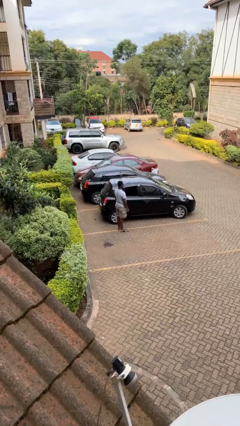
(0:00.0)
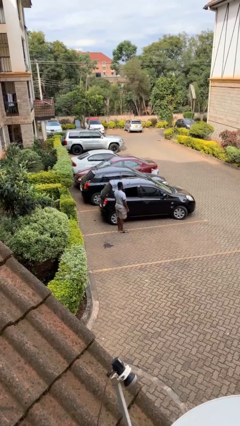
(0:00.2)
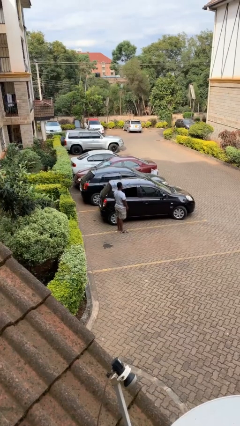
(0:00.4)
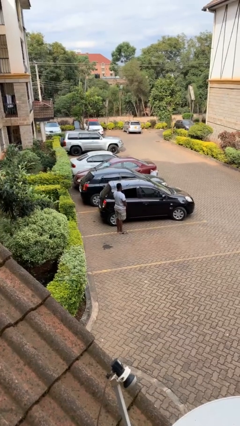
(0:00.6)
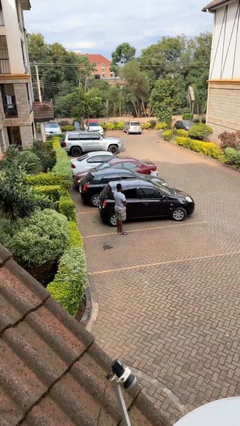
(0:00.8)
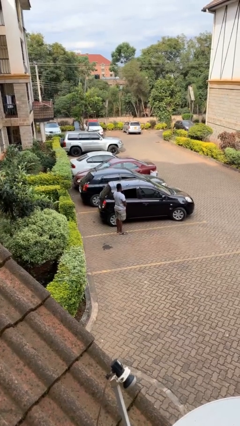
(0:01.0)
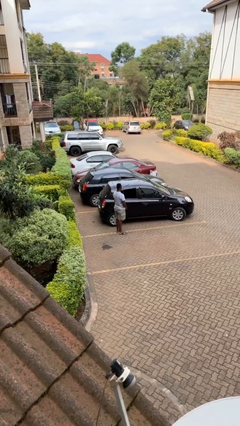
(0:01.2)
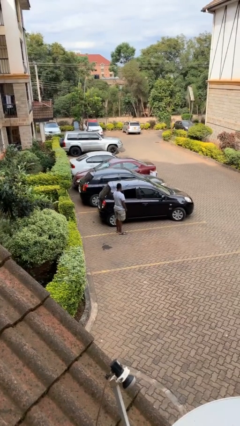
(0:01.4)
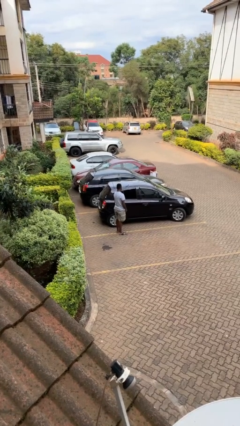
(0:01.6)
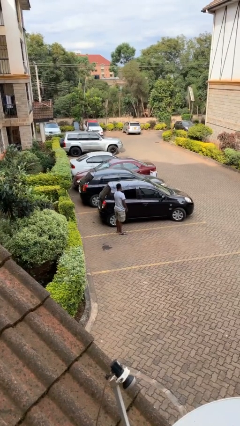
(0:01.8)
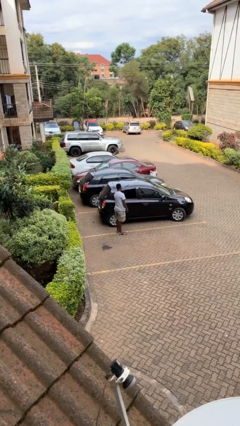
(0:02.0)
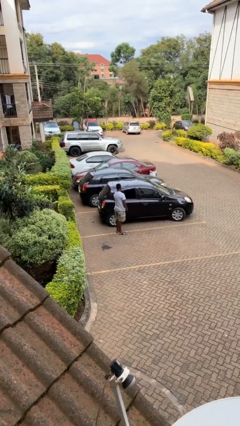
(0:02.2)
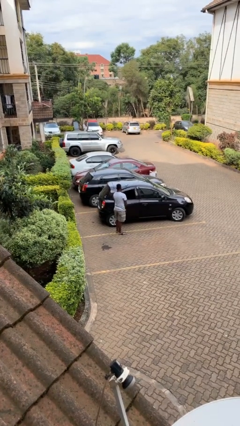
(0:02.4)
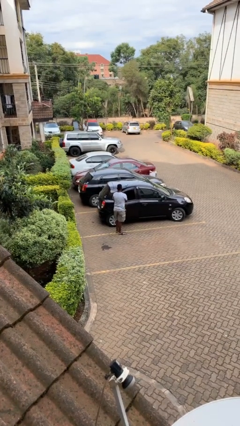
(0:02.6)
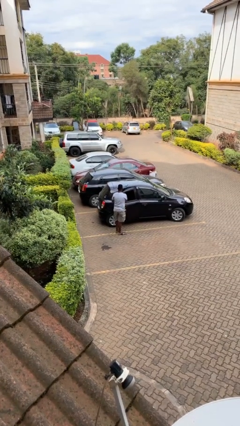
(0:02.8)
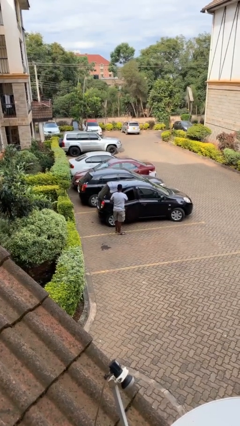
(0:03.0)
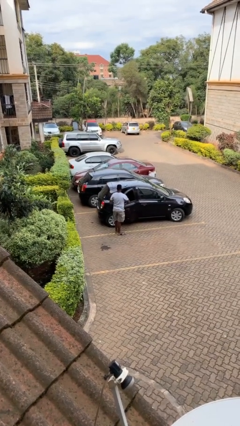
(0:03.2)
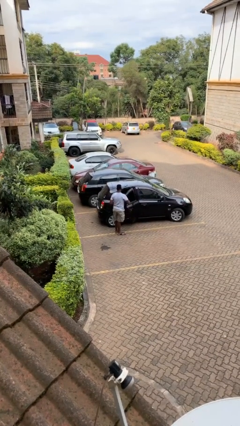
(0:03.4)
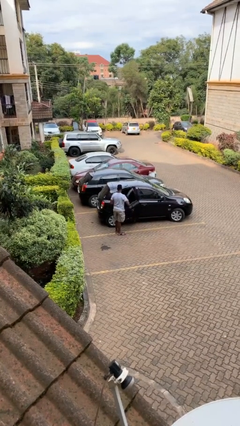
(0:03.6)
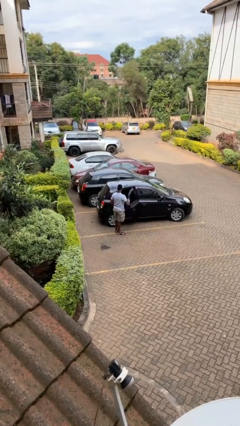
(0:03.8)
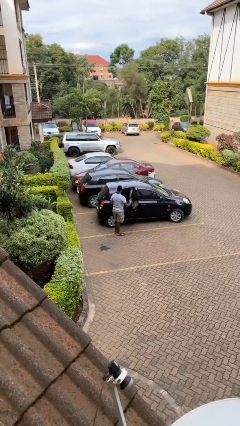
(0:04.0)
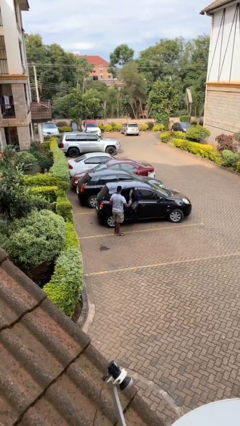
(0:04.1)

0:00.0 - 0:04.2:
person opens car door

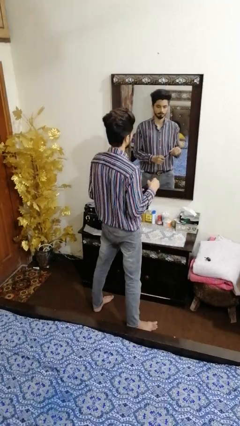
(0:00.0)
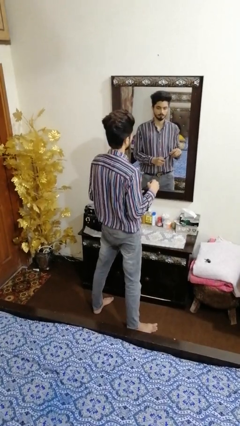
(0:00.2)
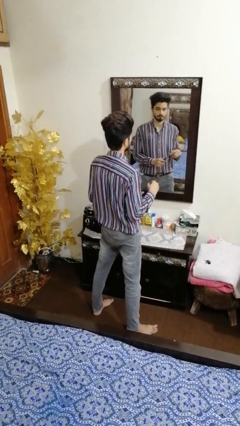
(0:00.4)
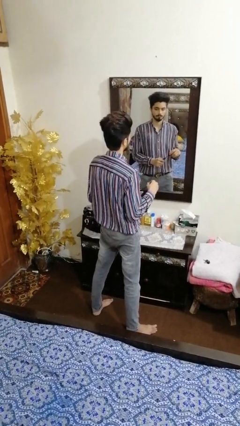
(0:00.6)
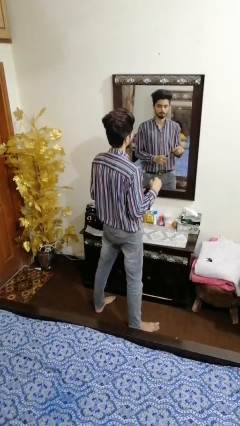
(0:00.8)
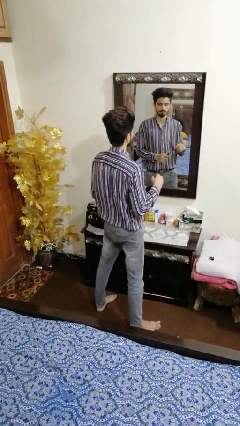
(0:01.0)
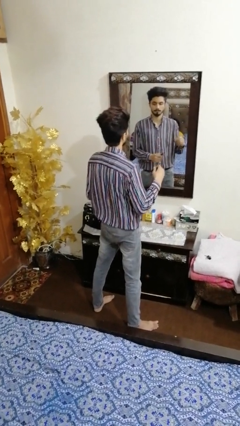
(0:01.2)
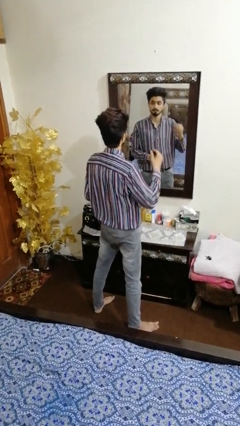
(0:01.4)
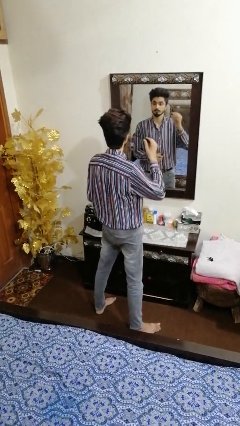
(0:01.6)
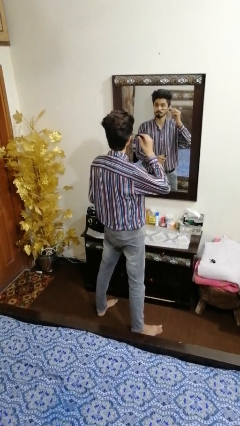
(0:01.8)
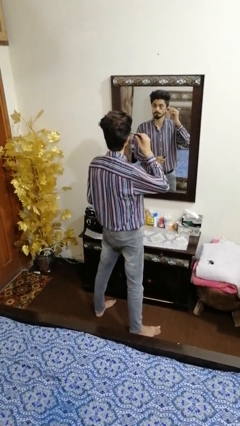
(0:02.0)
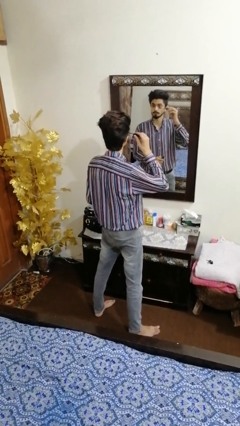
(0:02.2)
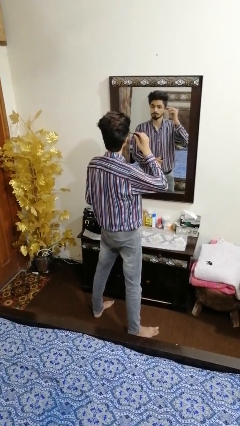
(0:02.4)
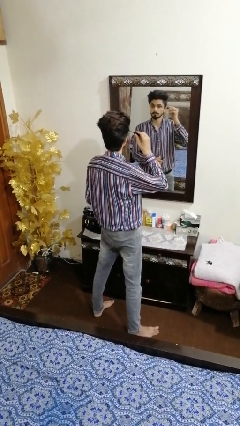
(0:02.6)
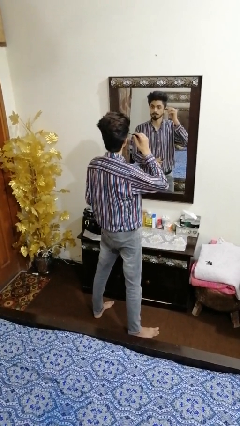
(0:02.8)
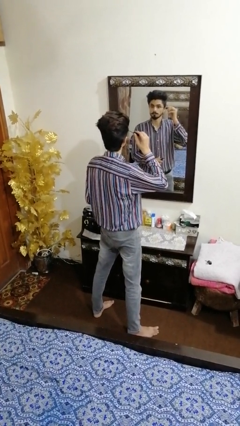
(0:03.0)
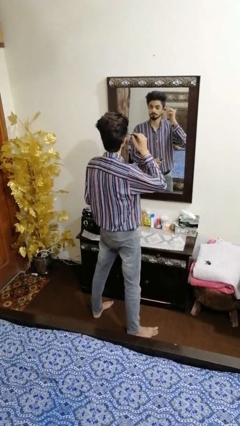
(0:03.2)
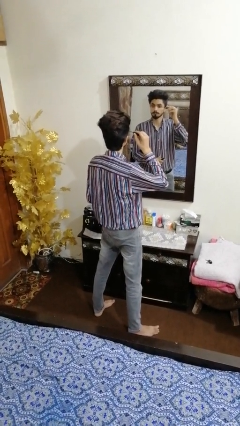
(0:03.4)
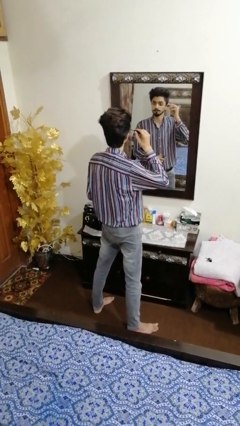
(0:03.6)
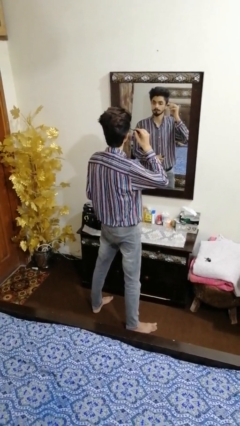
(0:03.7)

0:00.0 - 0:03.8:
person applies eye makeup

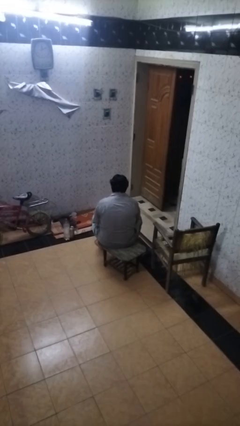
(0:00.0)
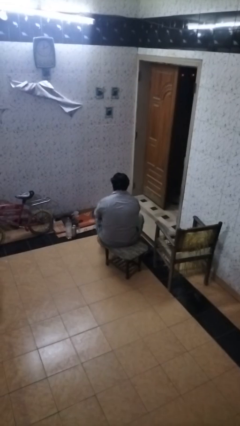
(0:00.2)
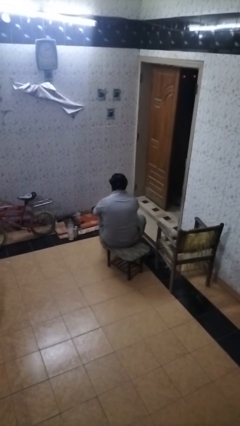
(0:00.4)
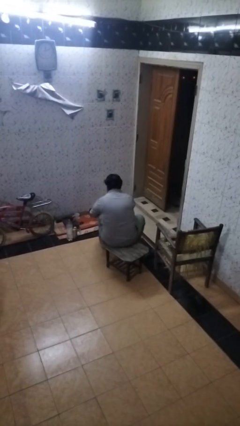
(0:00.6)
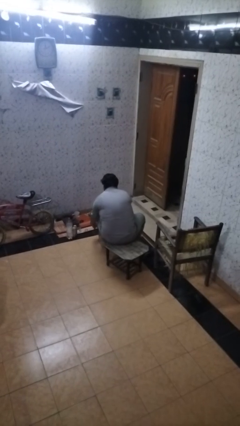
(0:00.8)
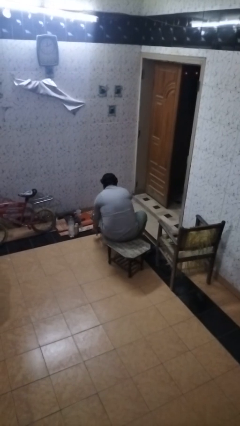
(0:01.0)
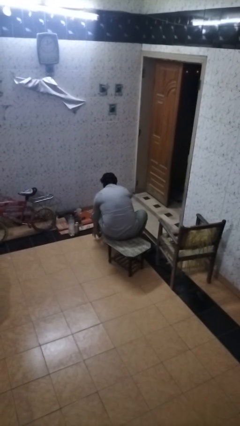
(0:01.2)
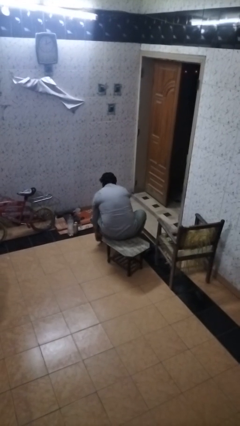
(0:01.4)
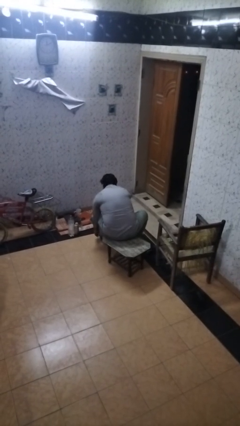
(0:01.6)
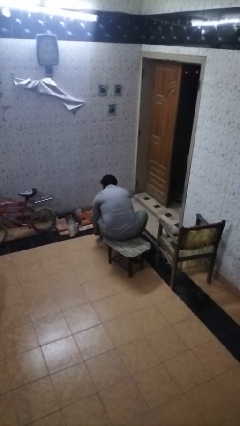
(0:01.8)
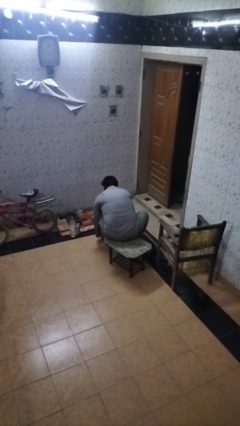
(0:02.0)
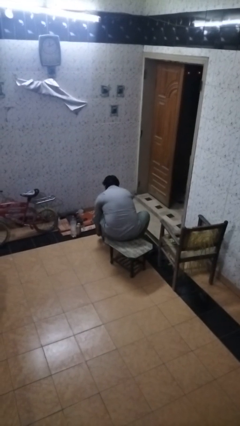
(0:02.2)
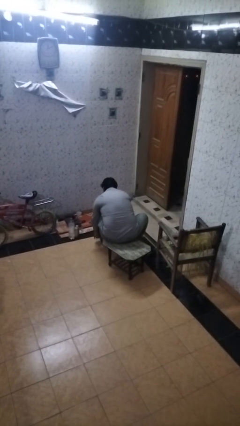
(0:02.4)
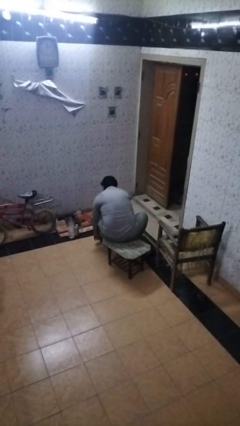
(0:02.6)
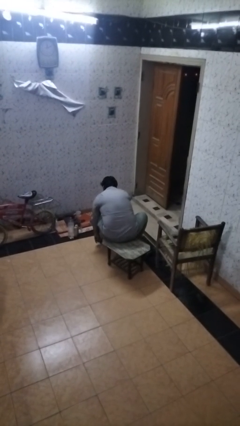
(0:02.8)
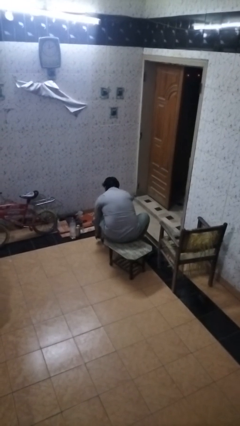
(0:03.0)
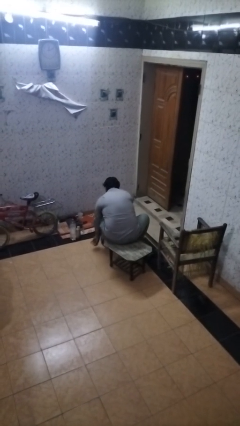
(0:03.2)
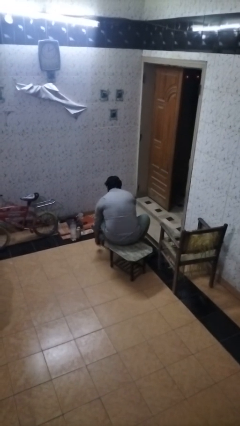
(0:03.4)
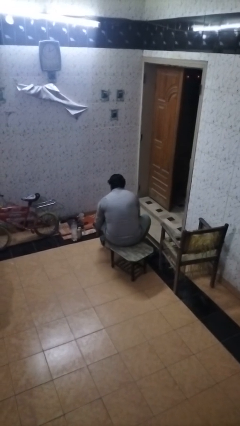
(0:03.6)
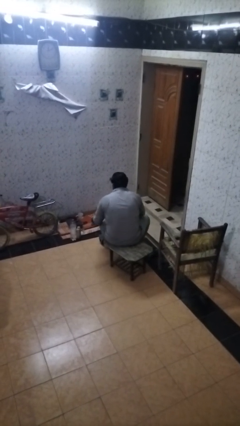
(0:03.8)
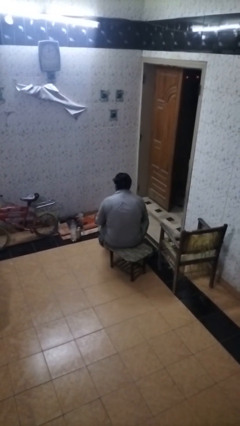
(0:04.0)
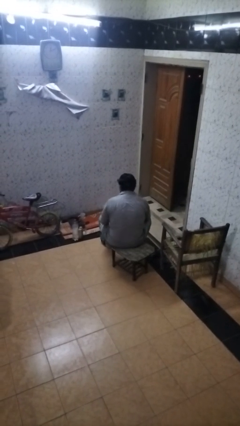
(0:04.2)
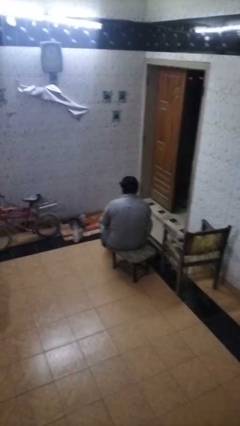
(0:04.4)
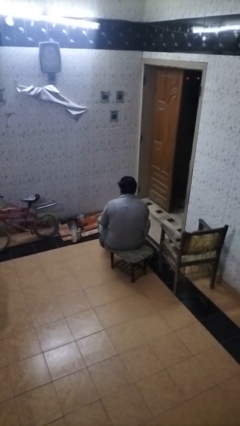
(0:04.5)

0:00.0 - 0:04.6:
person puts on socks

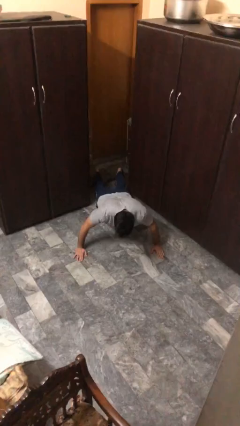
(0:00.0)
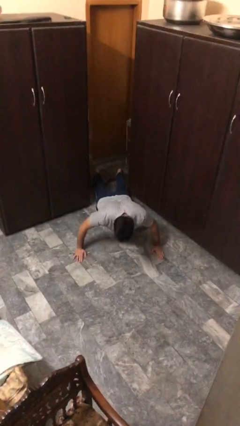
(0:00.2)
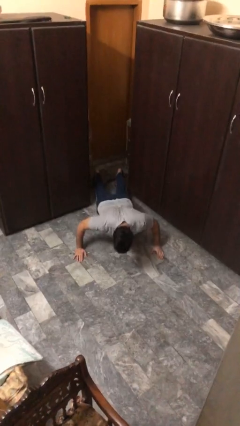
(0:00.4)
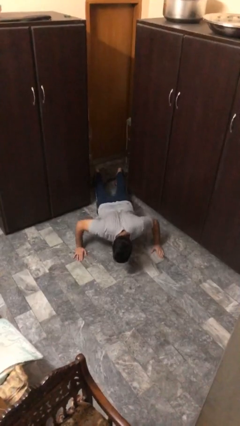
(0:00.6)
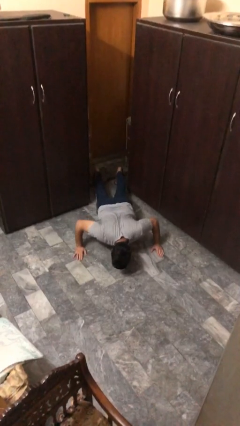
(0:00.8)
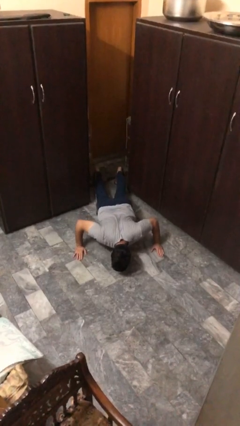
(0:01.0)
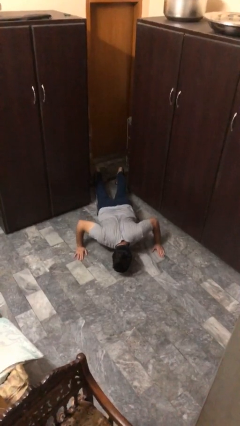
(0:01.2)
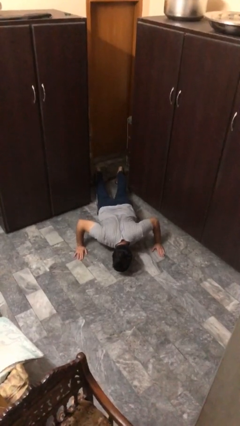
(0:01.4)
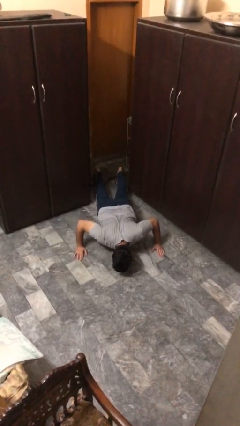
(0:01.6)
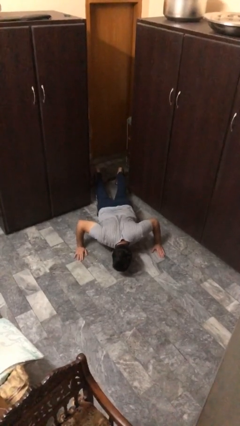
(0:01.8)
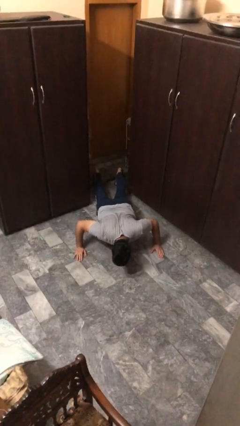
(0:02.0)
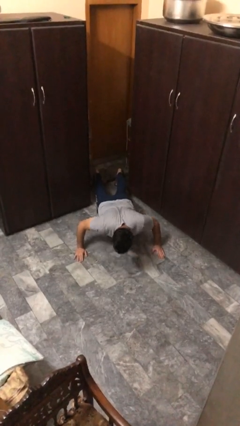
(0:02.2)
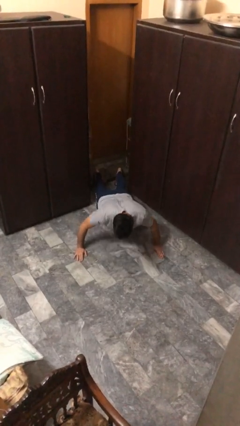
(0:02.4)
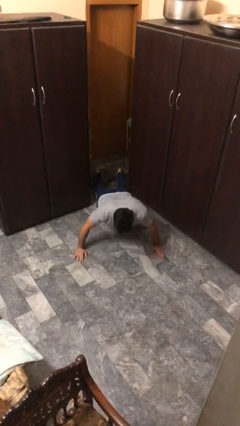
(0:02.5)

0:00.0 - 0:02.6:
person exercises with pushup

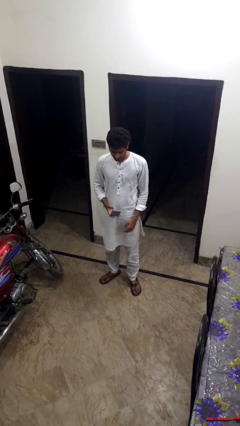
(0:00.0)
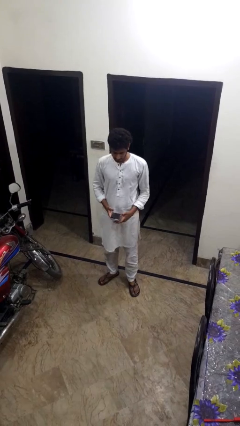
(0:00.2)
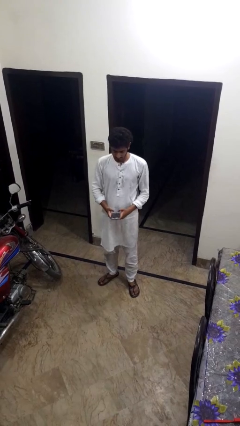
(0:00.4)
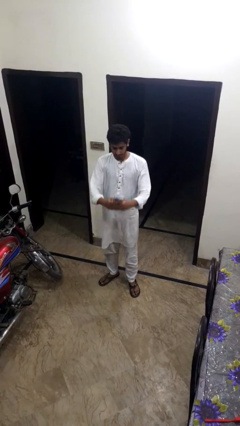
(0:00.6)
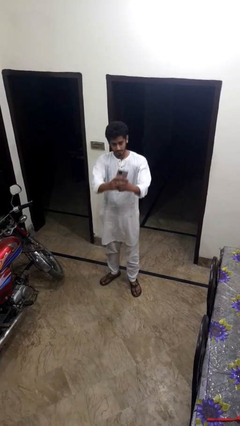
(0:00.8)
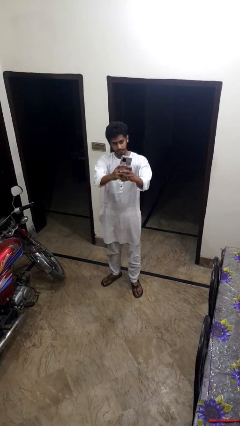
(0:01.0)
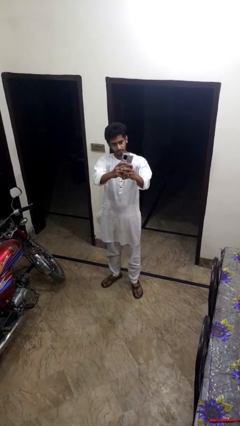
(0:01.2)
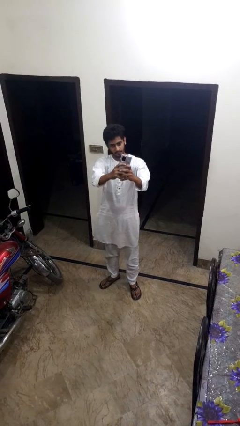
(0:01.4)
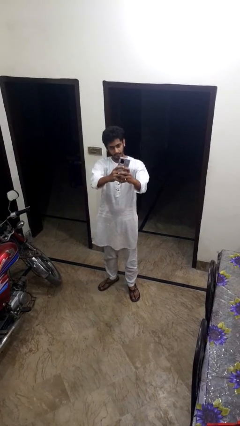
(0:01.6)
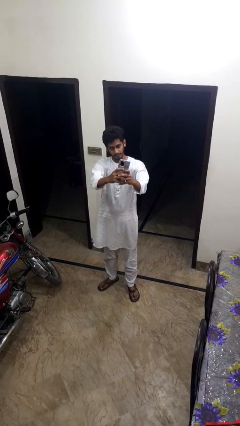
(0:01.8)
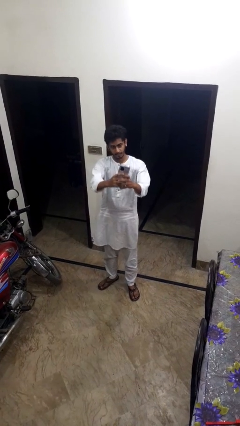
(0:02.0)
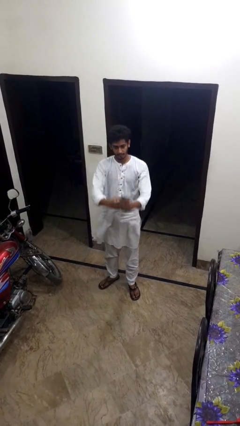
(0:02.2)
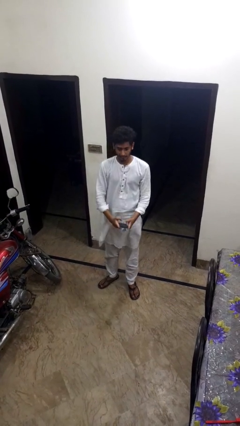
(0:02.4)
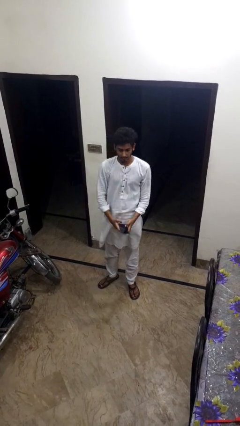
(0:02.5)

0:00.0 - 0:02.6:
person takes selfie
